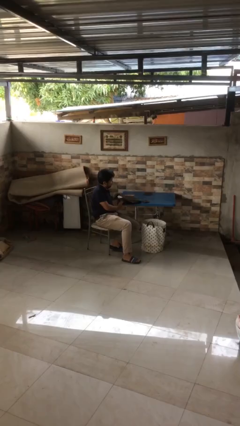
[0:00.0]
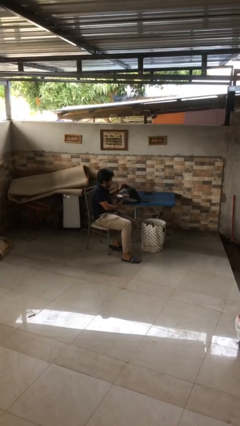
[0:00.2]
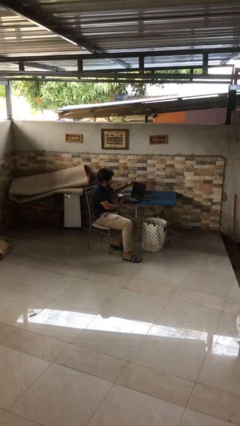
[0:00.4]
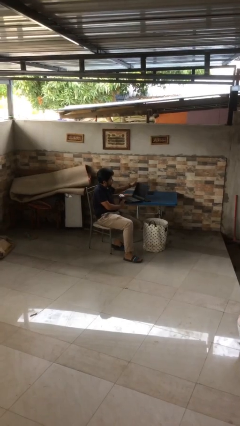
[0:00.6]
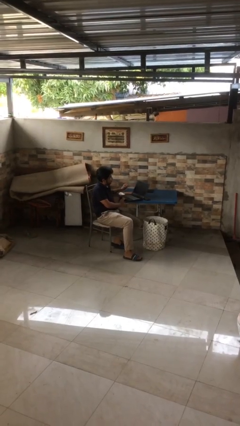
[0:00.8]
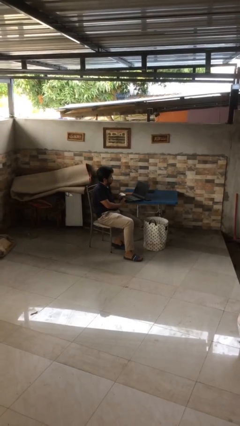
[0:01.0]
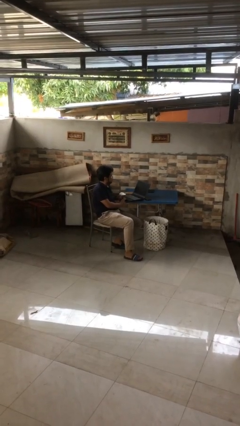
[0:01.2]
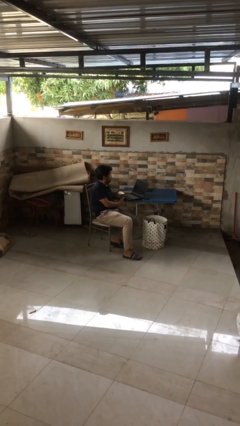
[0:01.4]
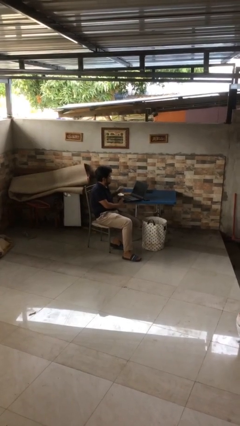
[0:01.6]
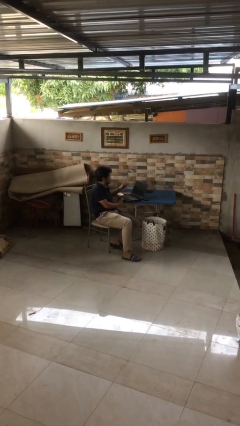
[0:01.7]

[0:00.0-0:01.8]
person opens laptop

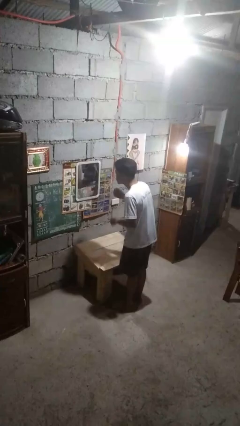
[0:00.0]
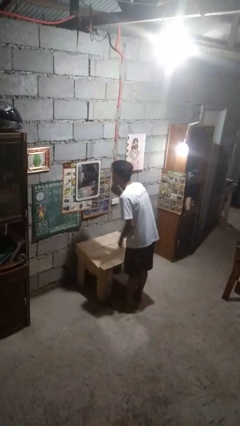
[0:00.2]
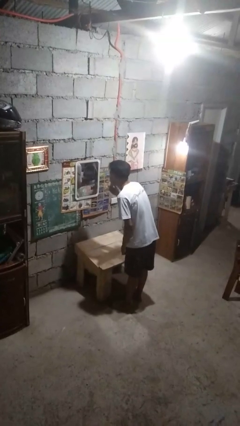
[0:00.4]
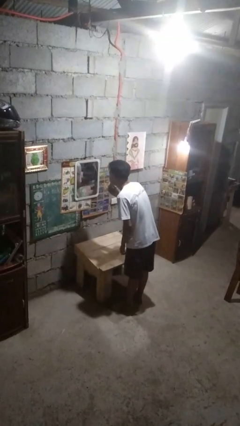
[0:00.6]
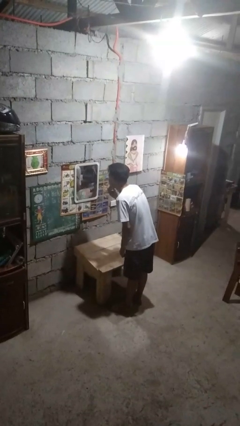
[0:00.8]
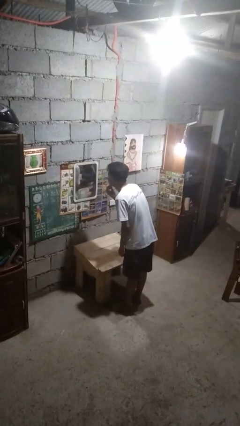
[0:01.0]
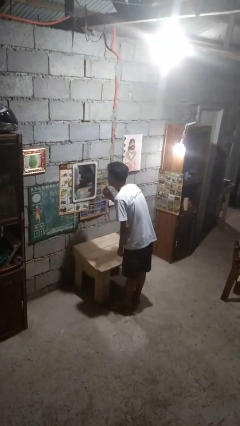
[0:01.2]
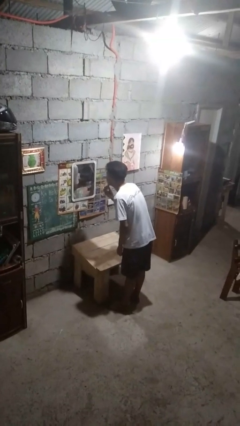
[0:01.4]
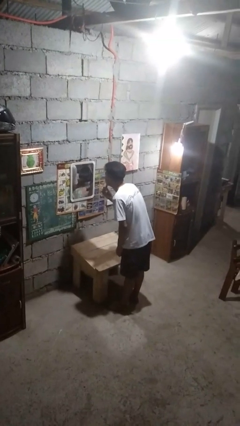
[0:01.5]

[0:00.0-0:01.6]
person applies foundation makeup

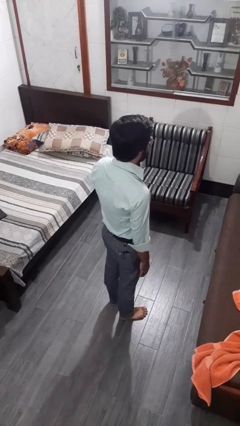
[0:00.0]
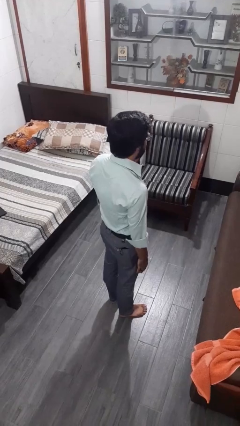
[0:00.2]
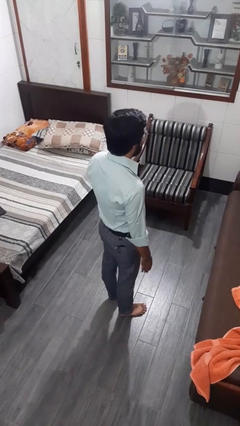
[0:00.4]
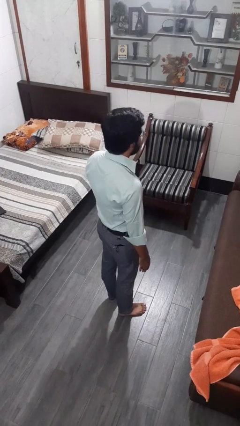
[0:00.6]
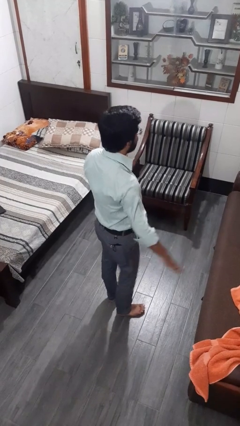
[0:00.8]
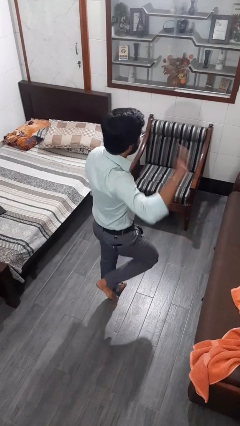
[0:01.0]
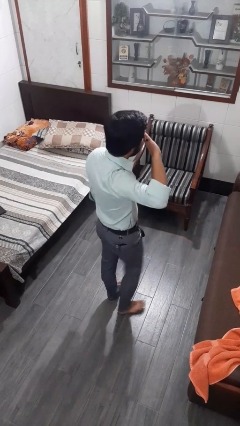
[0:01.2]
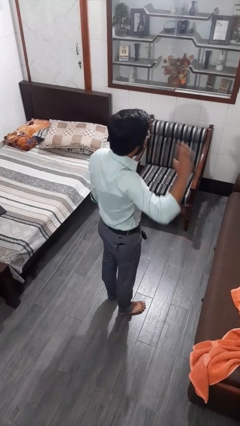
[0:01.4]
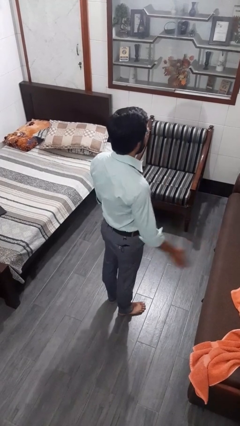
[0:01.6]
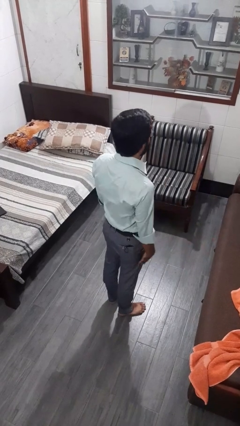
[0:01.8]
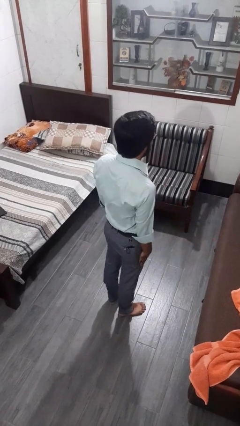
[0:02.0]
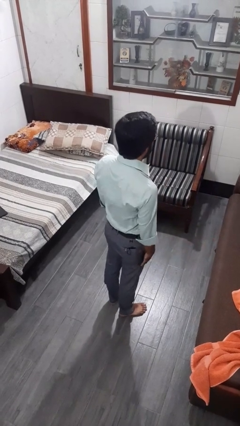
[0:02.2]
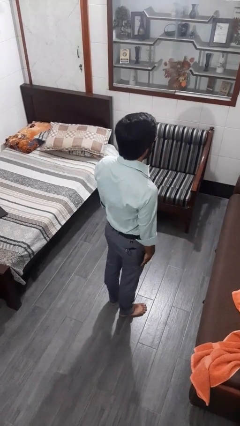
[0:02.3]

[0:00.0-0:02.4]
person salutes

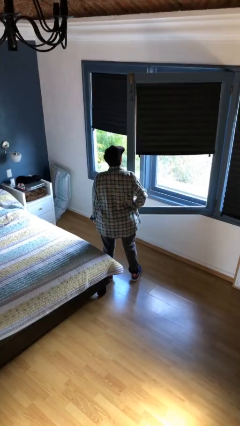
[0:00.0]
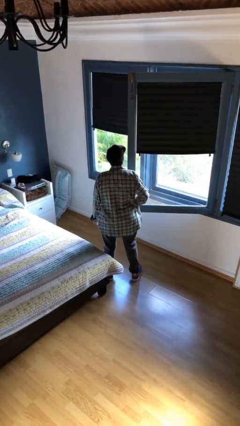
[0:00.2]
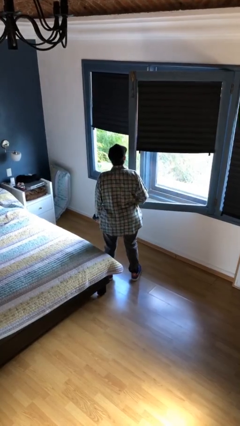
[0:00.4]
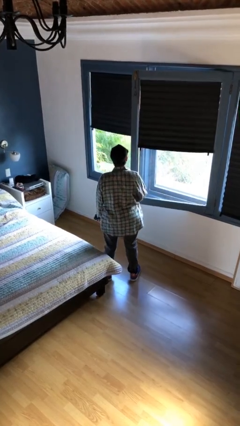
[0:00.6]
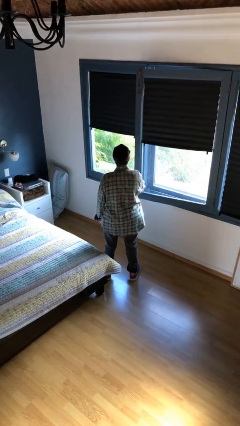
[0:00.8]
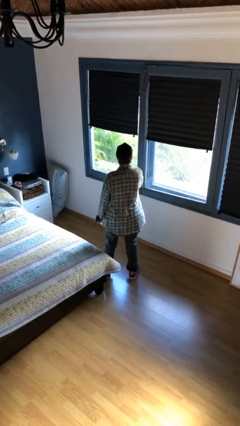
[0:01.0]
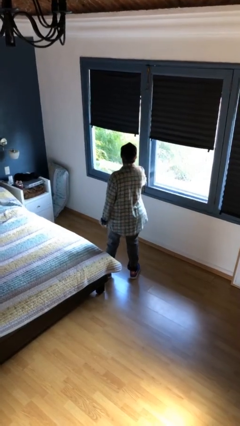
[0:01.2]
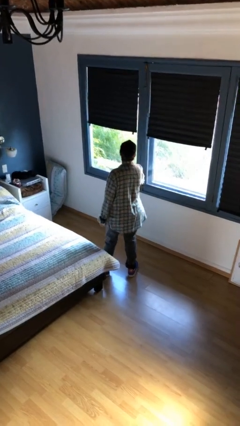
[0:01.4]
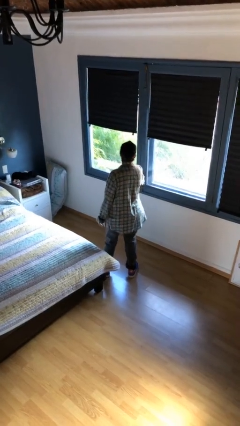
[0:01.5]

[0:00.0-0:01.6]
person closes home window

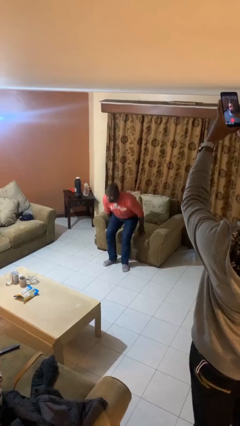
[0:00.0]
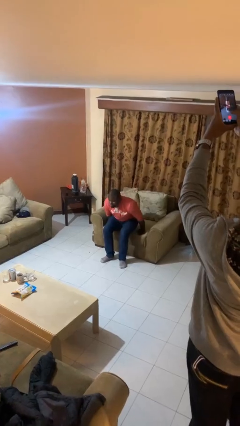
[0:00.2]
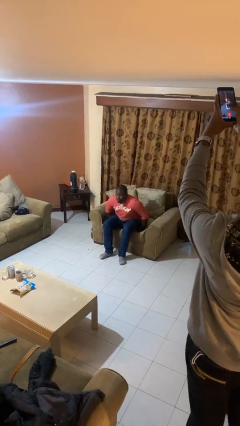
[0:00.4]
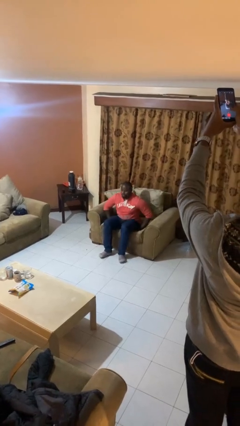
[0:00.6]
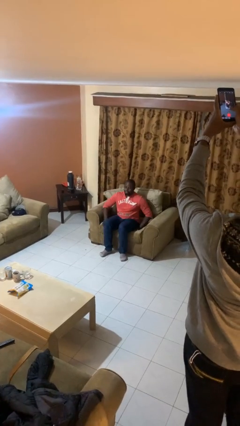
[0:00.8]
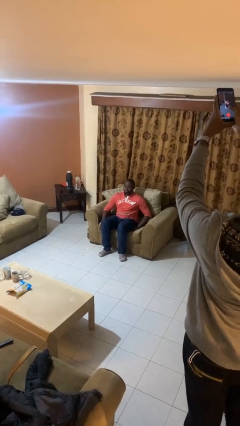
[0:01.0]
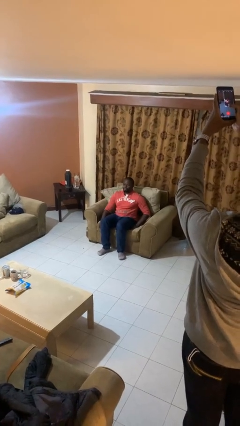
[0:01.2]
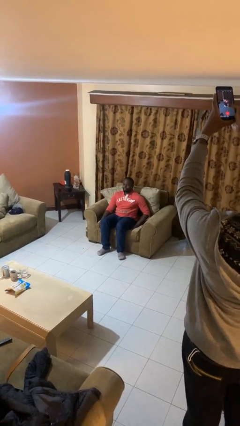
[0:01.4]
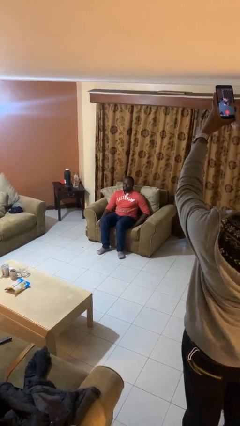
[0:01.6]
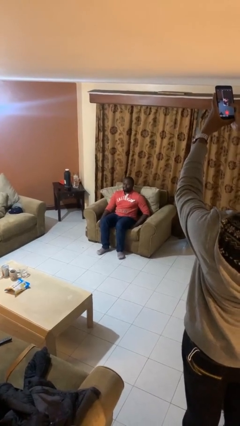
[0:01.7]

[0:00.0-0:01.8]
person sits down

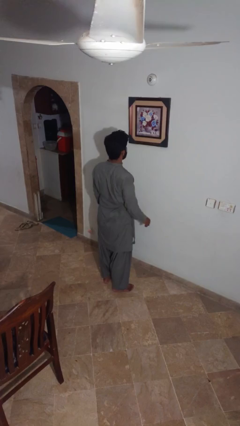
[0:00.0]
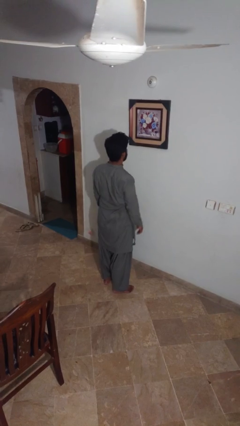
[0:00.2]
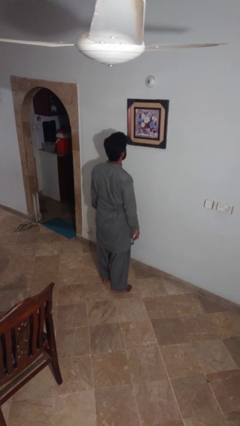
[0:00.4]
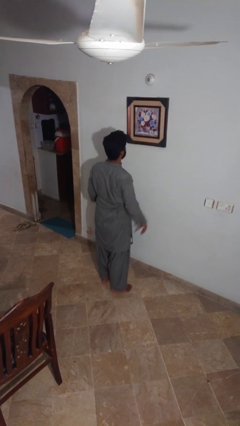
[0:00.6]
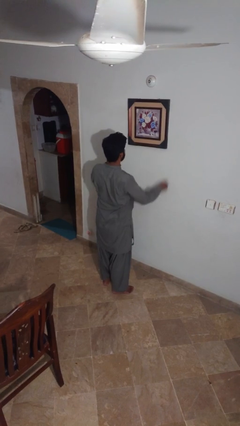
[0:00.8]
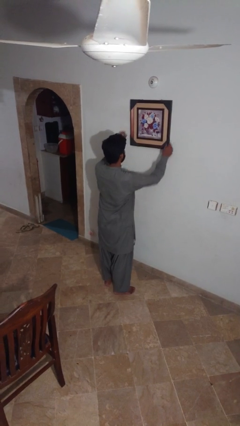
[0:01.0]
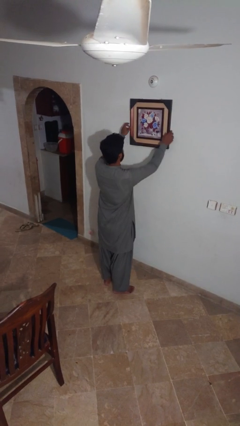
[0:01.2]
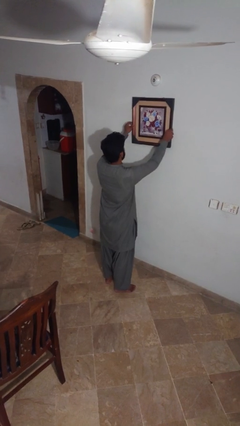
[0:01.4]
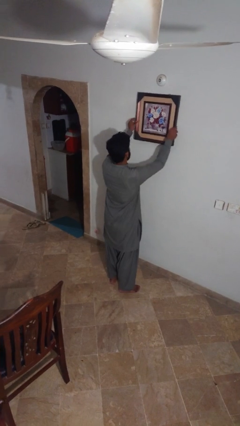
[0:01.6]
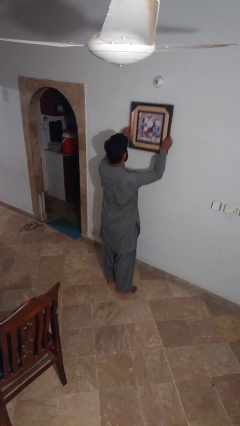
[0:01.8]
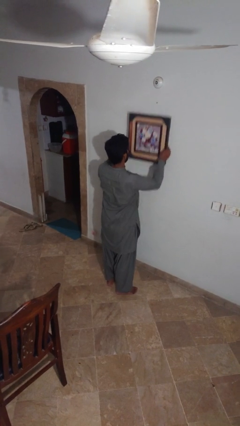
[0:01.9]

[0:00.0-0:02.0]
person takes down picture frame

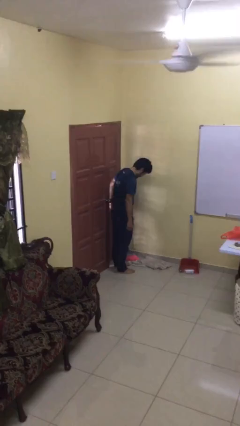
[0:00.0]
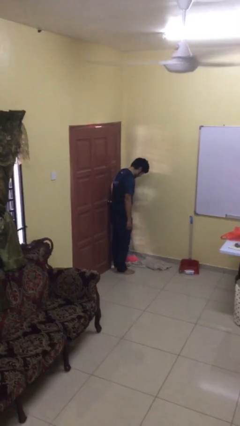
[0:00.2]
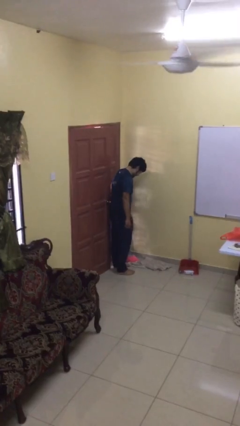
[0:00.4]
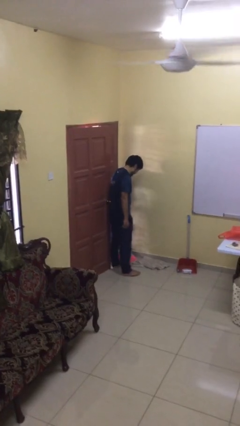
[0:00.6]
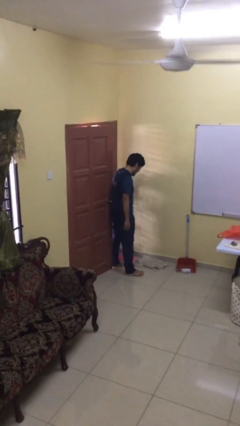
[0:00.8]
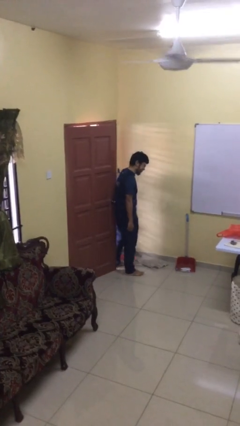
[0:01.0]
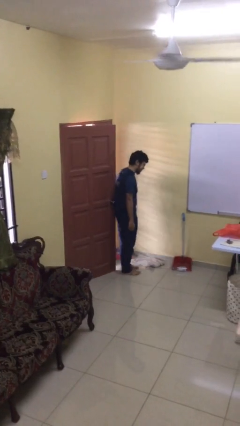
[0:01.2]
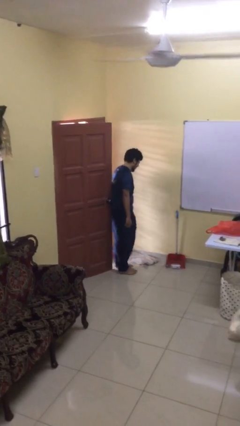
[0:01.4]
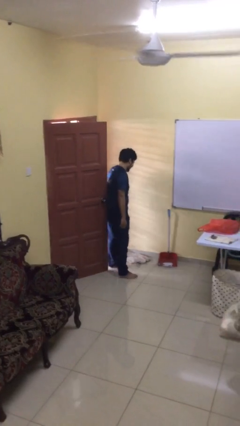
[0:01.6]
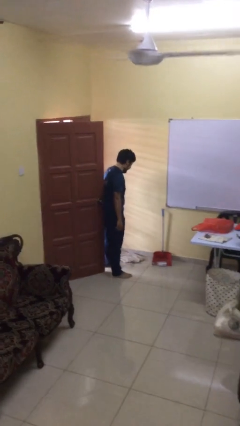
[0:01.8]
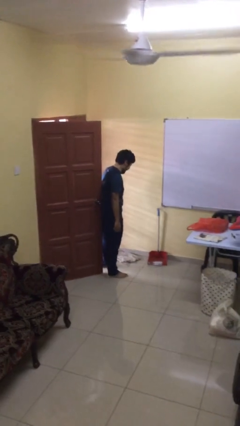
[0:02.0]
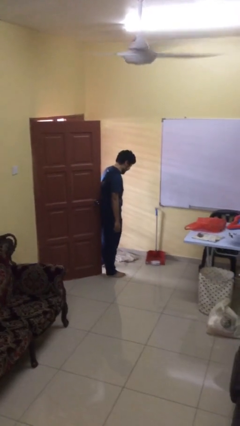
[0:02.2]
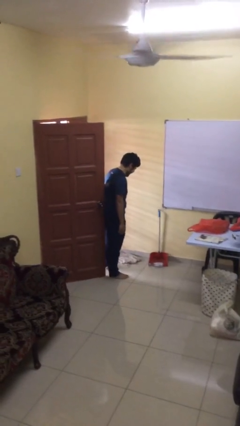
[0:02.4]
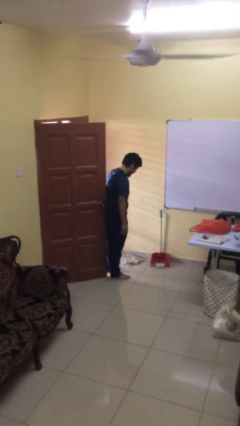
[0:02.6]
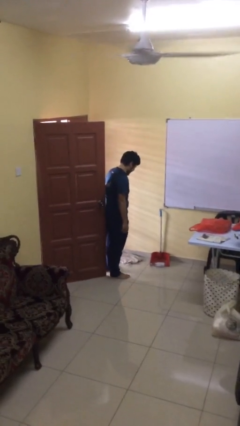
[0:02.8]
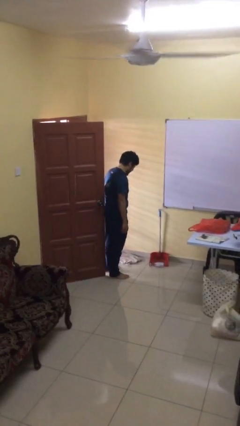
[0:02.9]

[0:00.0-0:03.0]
person opens facility door

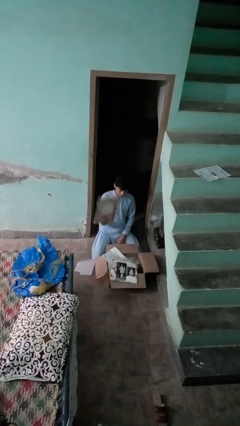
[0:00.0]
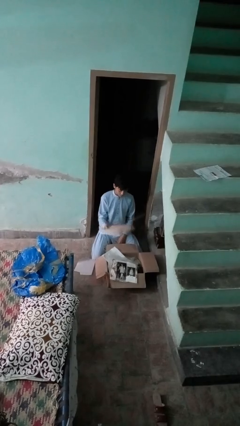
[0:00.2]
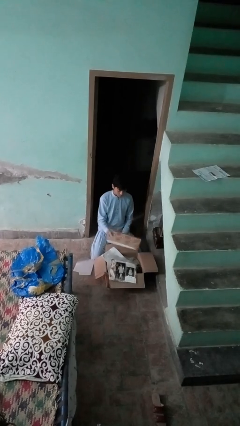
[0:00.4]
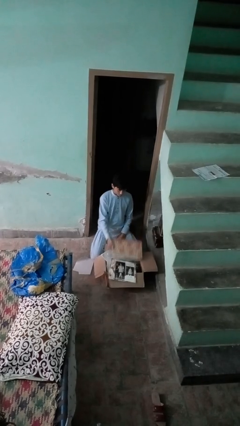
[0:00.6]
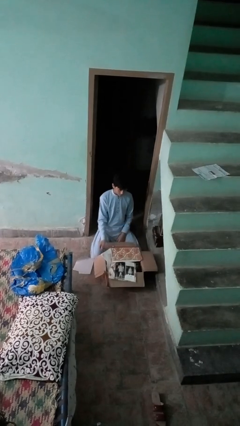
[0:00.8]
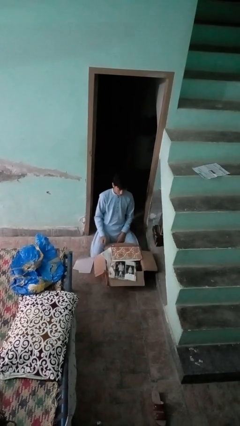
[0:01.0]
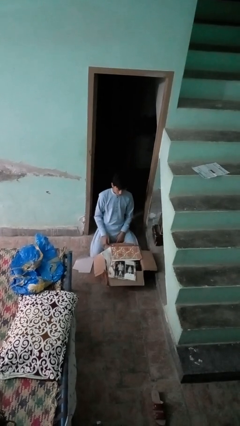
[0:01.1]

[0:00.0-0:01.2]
person puts object into box

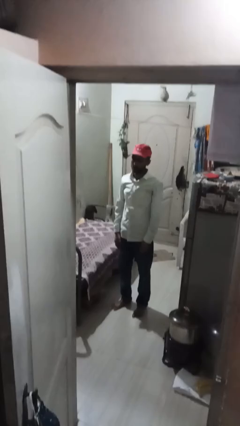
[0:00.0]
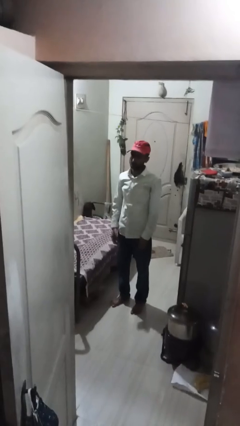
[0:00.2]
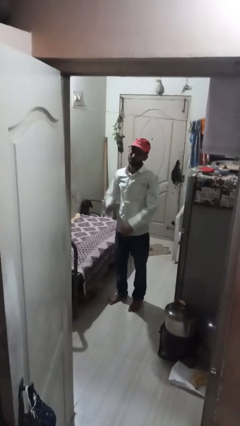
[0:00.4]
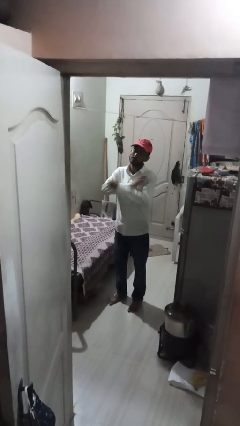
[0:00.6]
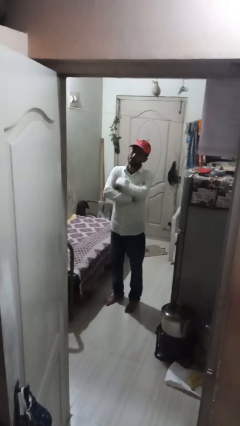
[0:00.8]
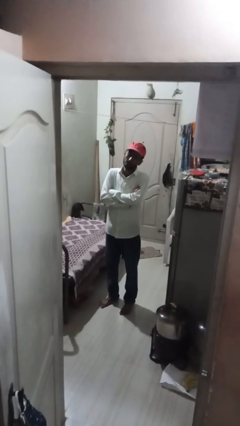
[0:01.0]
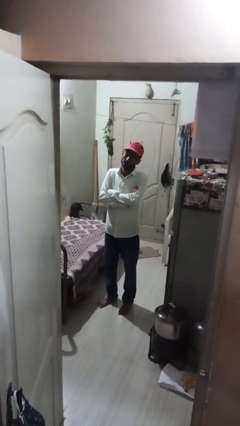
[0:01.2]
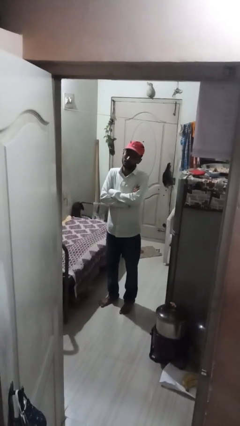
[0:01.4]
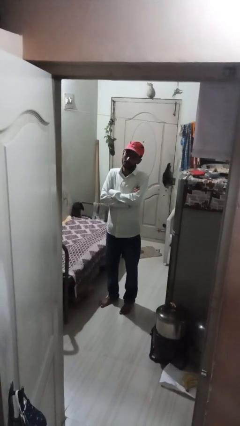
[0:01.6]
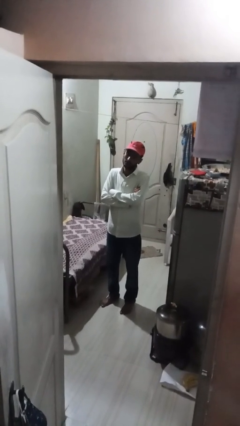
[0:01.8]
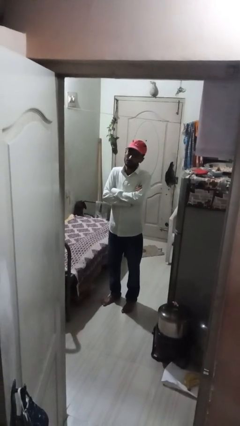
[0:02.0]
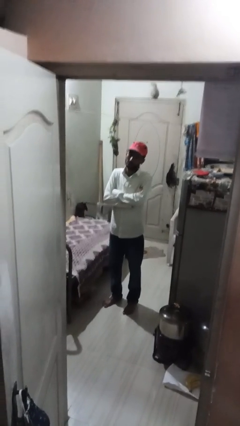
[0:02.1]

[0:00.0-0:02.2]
person crosses arms
